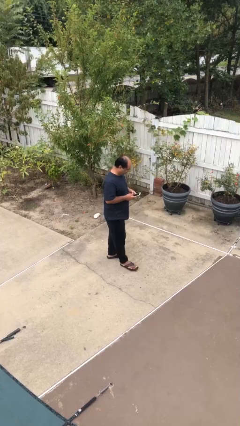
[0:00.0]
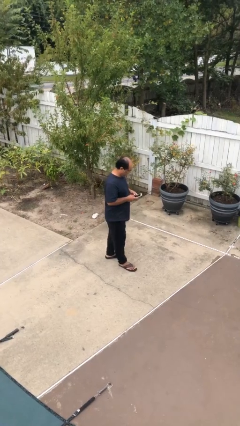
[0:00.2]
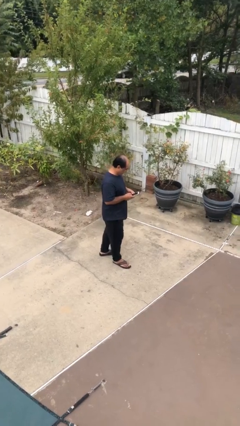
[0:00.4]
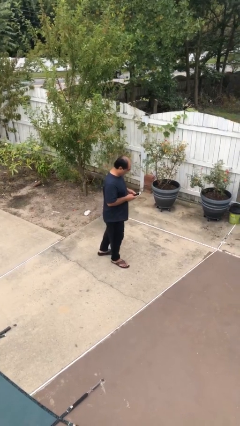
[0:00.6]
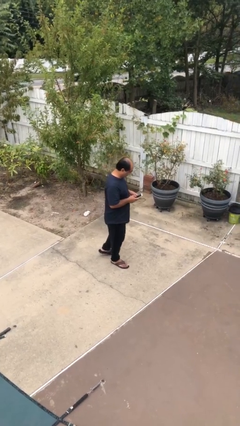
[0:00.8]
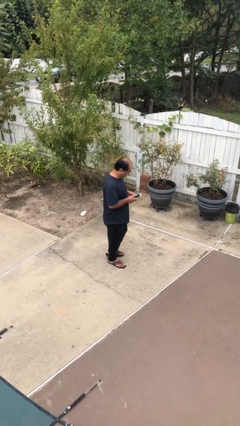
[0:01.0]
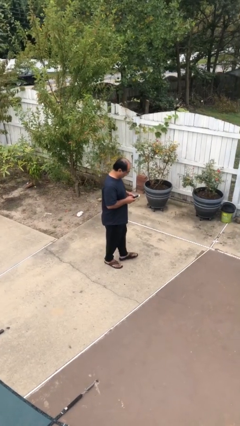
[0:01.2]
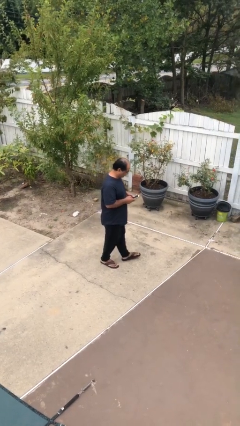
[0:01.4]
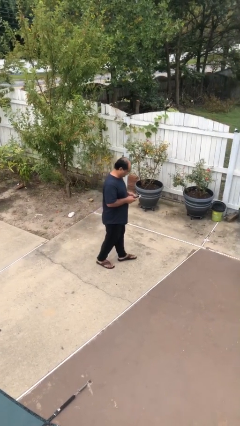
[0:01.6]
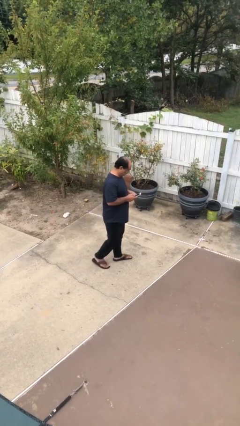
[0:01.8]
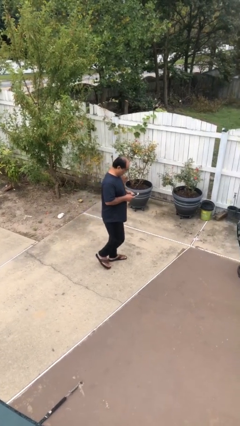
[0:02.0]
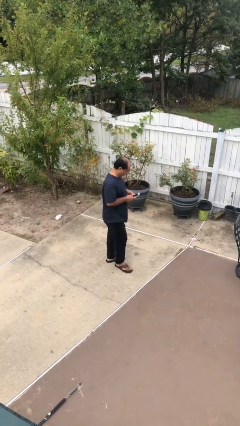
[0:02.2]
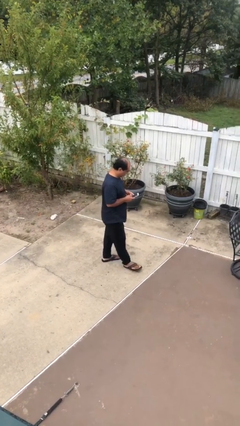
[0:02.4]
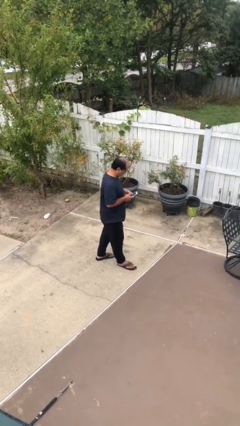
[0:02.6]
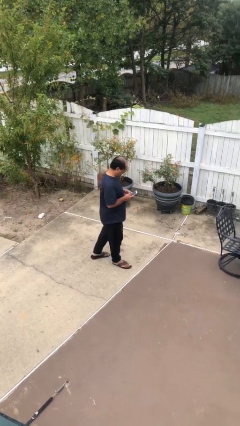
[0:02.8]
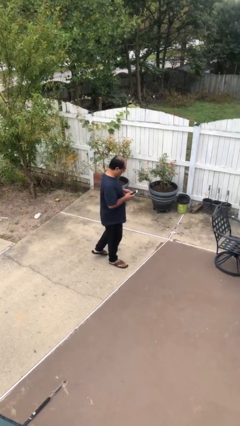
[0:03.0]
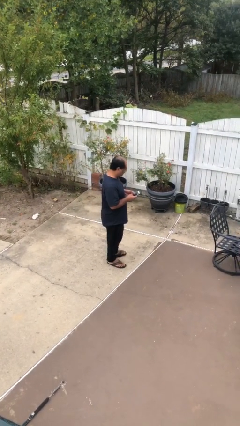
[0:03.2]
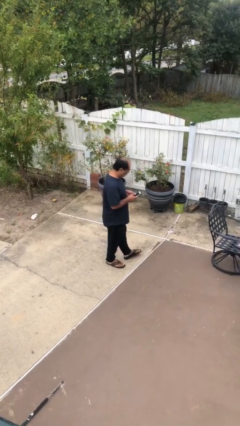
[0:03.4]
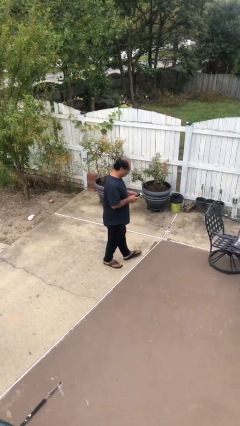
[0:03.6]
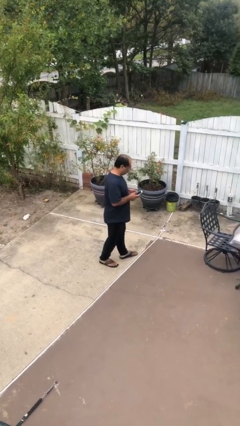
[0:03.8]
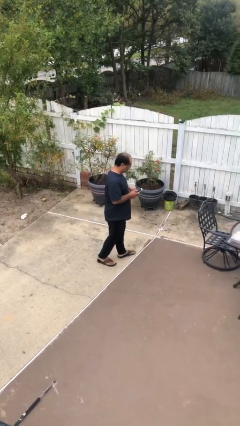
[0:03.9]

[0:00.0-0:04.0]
person texts on phone

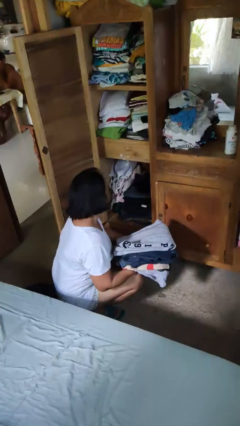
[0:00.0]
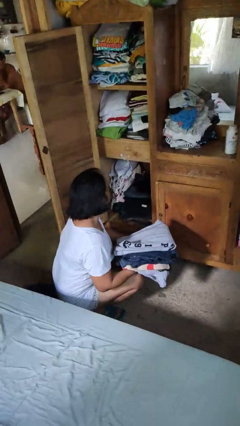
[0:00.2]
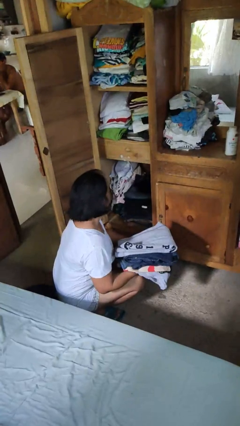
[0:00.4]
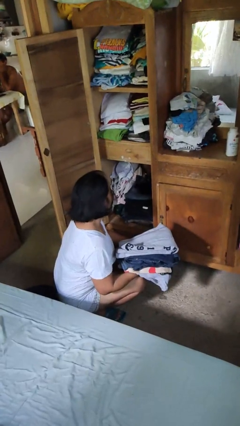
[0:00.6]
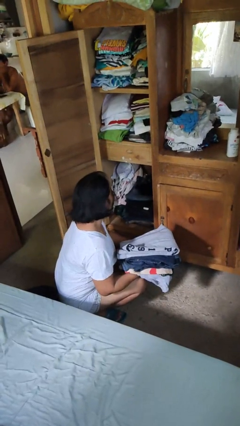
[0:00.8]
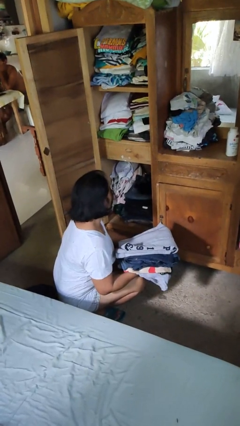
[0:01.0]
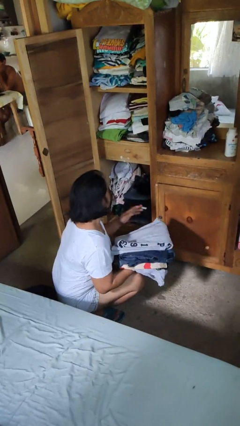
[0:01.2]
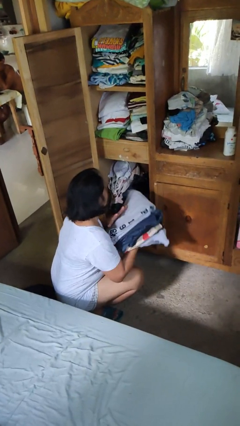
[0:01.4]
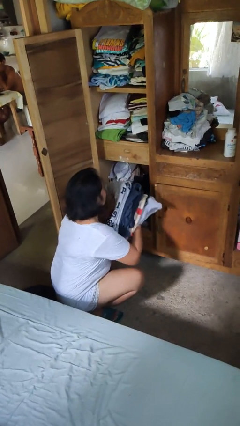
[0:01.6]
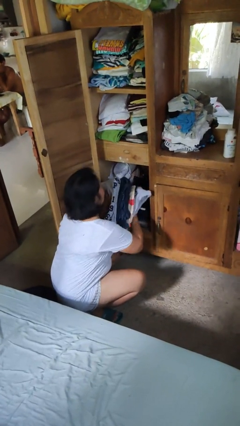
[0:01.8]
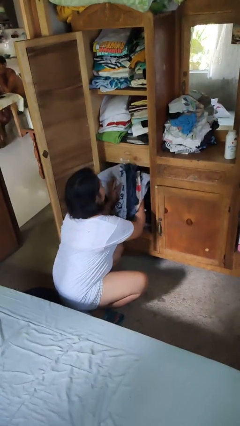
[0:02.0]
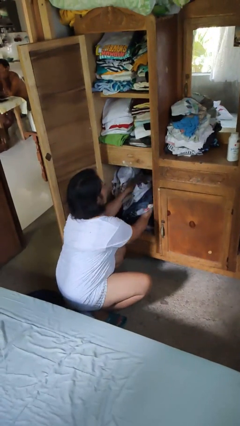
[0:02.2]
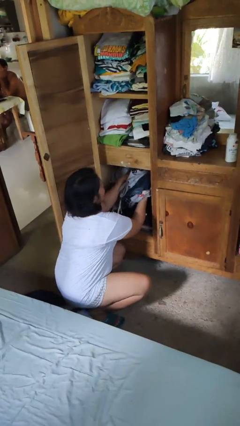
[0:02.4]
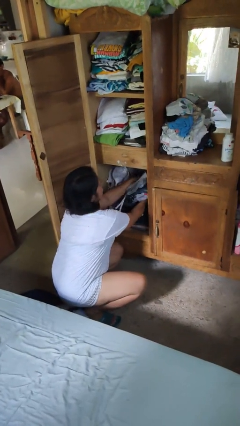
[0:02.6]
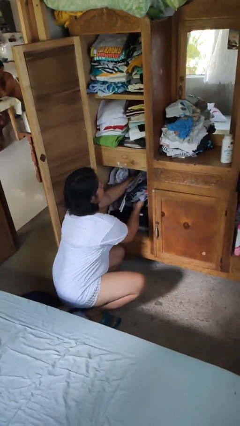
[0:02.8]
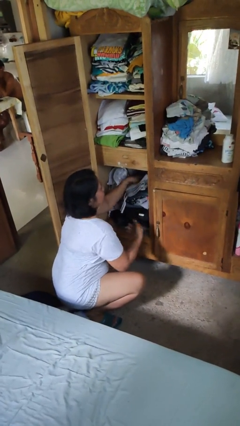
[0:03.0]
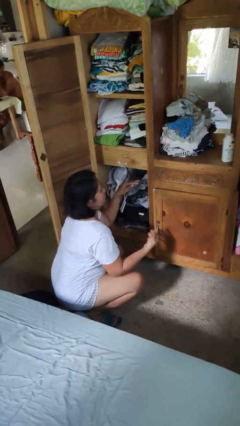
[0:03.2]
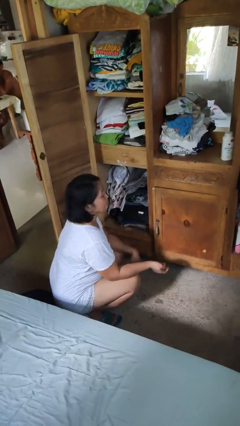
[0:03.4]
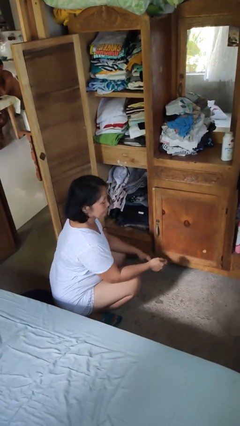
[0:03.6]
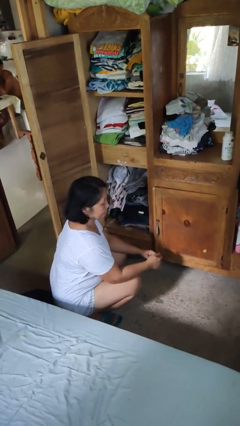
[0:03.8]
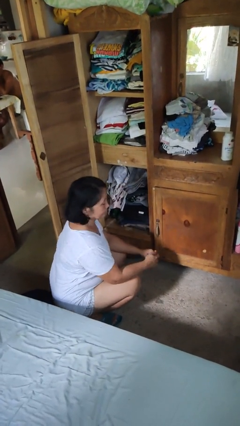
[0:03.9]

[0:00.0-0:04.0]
person puts clothes into dresser

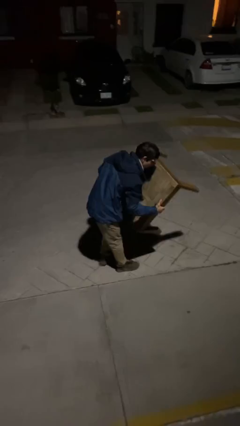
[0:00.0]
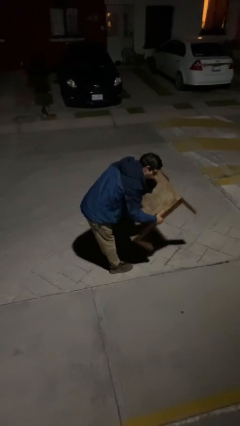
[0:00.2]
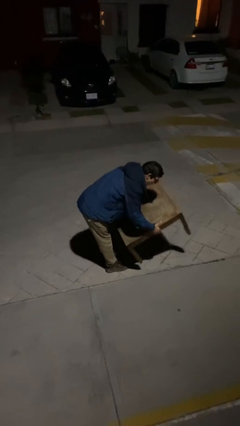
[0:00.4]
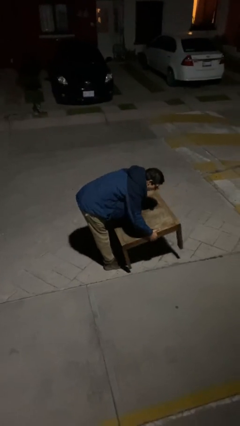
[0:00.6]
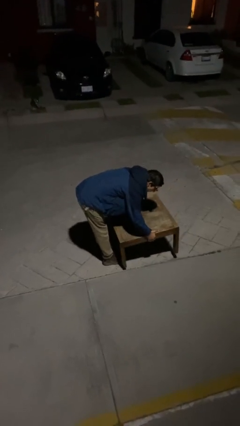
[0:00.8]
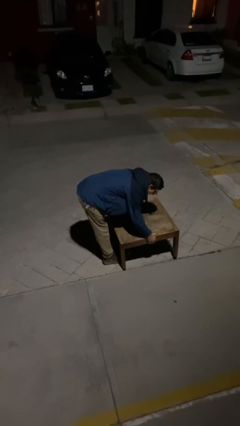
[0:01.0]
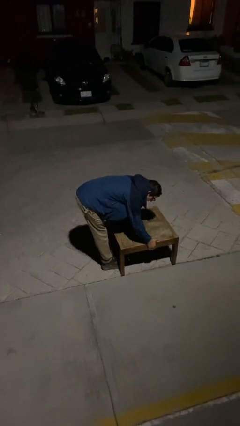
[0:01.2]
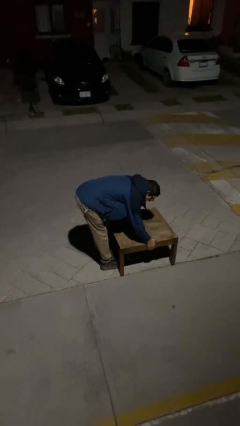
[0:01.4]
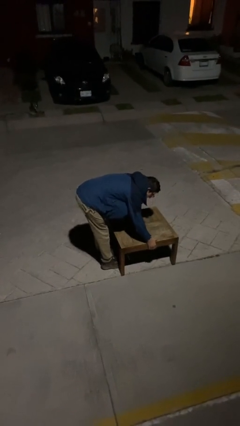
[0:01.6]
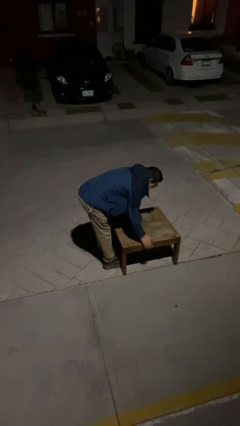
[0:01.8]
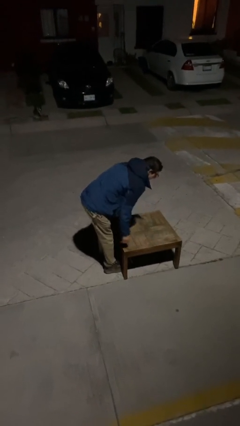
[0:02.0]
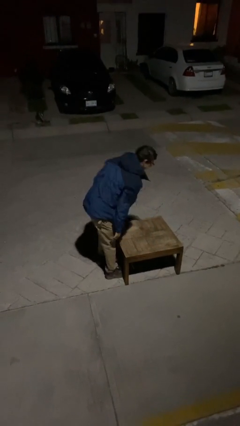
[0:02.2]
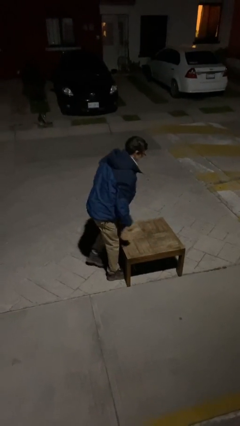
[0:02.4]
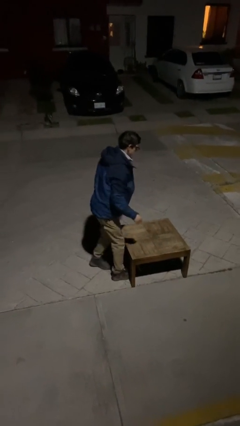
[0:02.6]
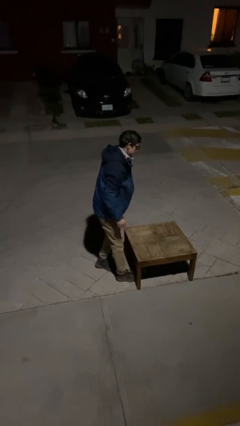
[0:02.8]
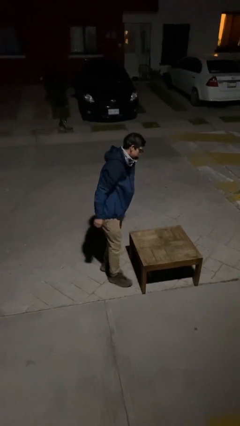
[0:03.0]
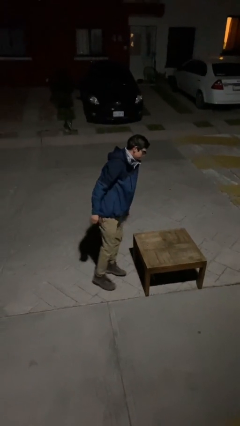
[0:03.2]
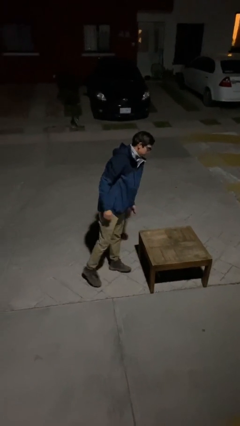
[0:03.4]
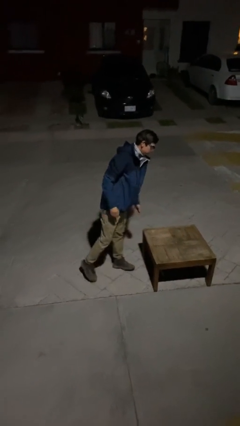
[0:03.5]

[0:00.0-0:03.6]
person puts down object on floor

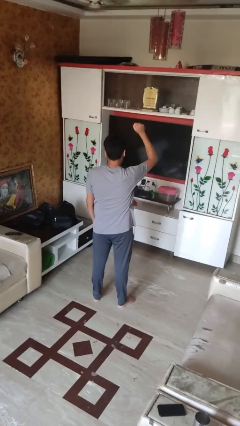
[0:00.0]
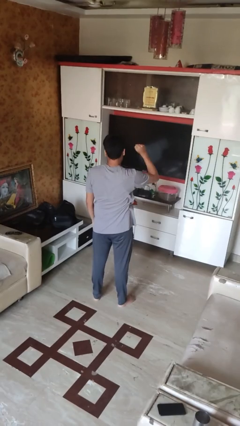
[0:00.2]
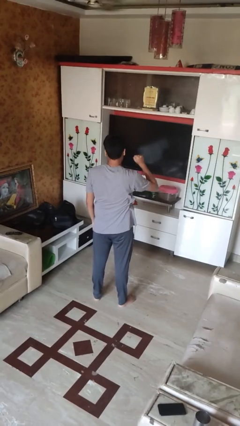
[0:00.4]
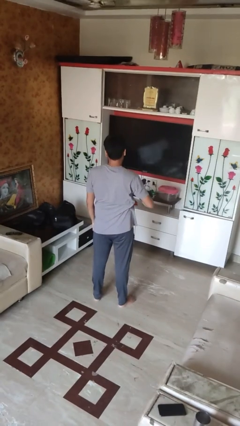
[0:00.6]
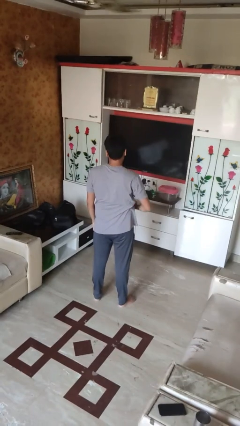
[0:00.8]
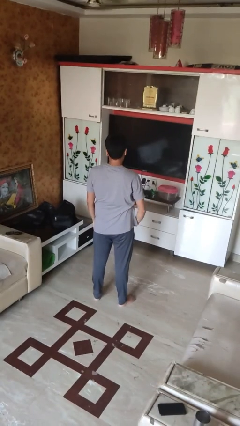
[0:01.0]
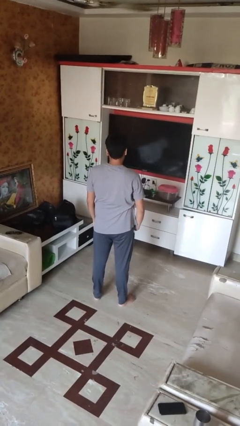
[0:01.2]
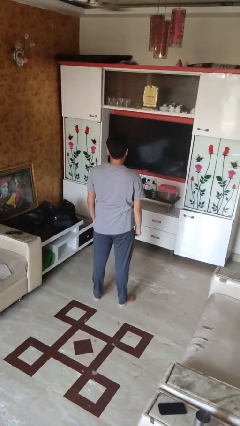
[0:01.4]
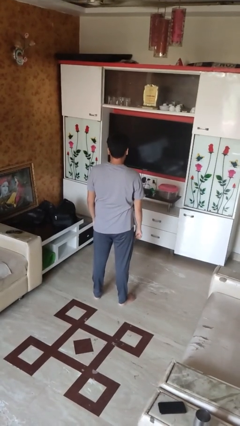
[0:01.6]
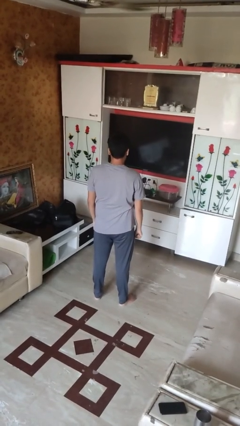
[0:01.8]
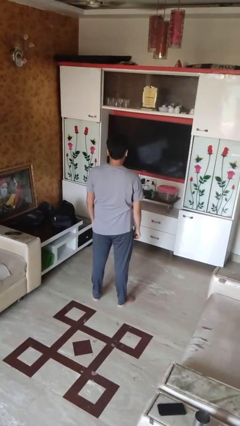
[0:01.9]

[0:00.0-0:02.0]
person gestures lower hand

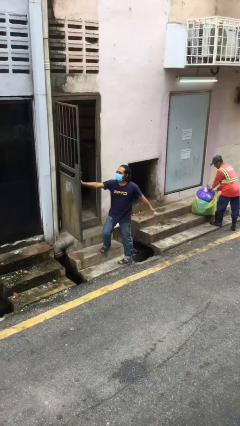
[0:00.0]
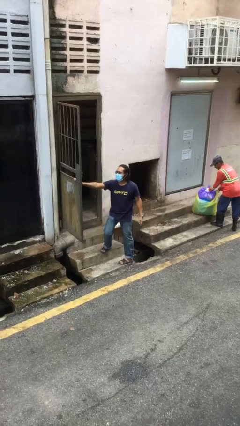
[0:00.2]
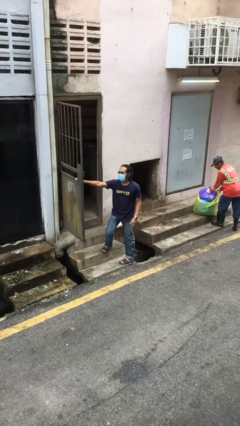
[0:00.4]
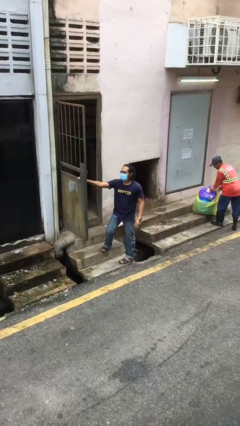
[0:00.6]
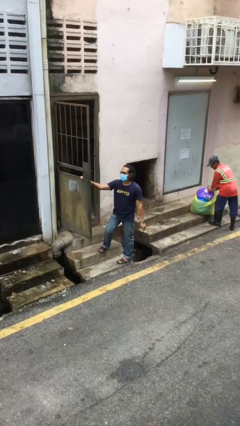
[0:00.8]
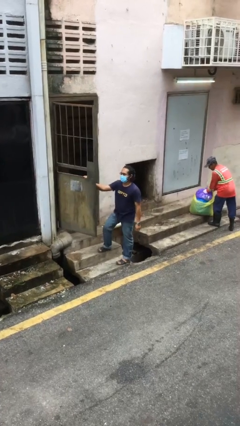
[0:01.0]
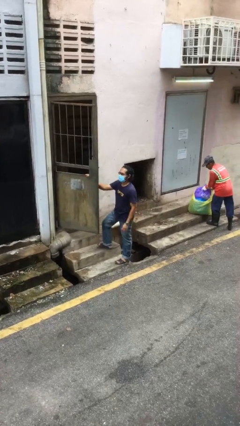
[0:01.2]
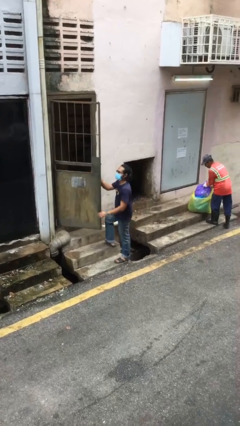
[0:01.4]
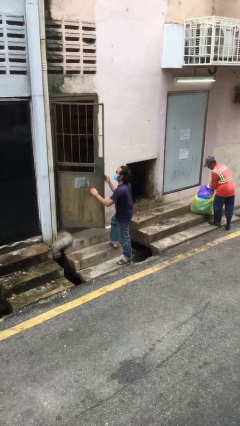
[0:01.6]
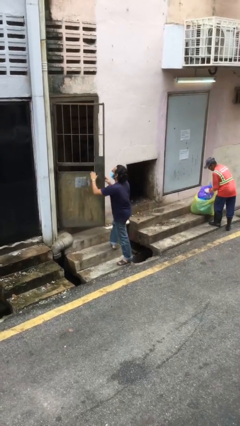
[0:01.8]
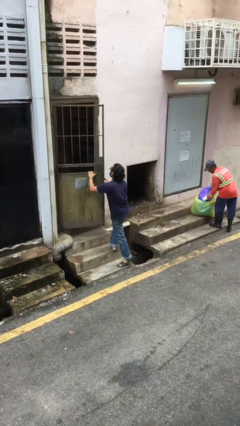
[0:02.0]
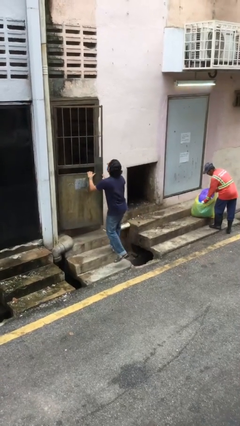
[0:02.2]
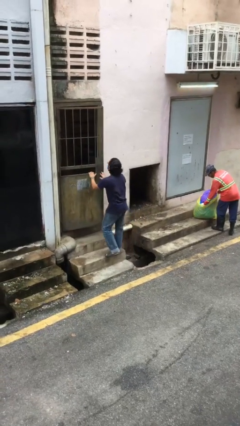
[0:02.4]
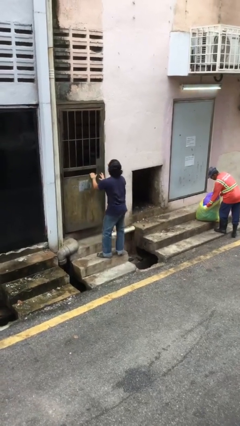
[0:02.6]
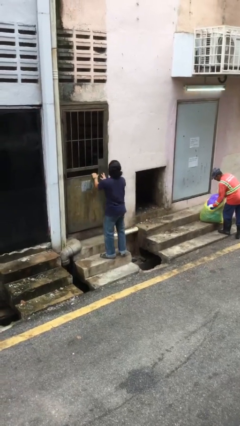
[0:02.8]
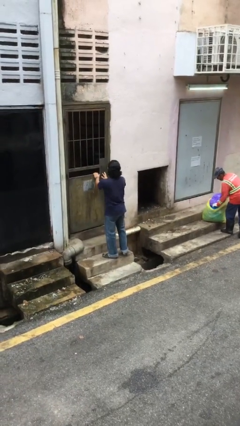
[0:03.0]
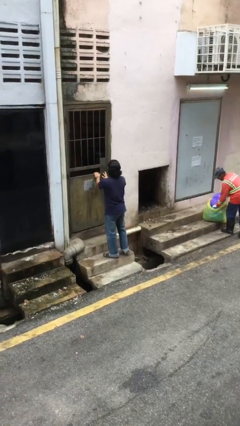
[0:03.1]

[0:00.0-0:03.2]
person closes facility door

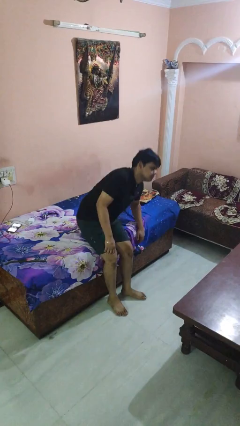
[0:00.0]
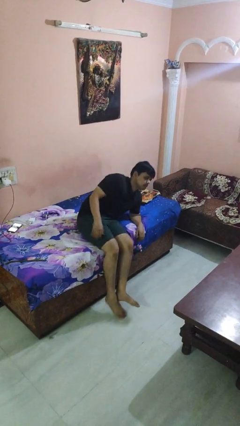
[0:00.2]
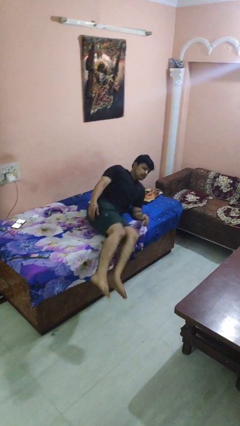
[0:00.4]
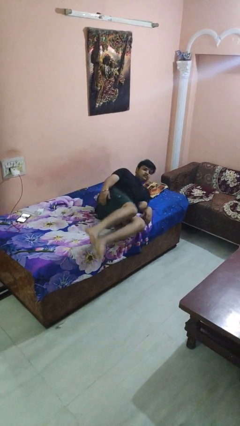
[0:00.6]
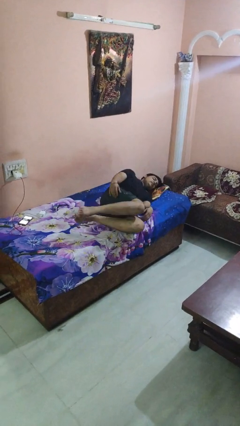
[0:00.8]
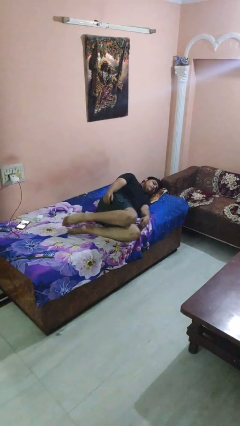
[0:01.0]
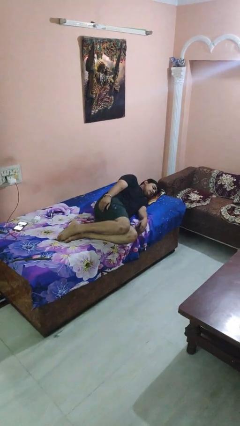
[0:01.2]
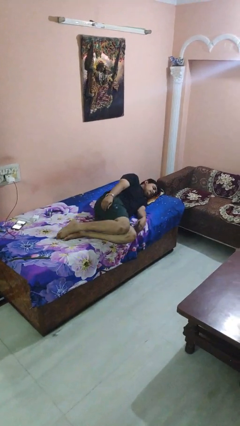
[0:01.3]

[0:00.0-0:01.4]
person lies down on bed
